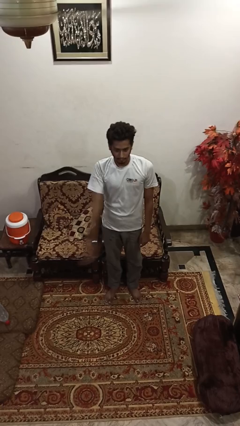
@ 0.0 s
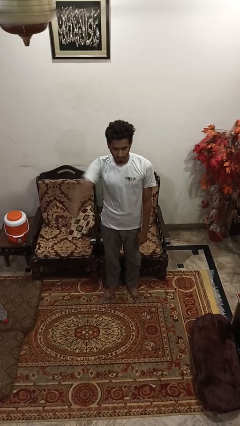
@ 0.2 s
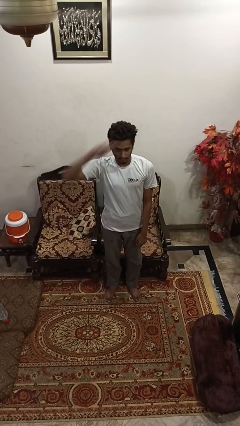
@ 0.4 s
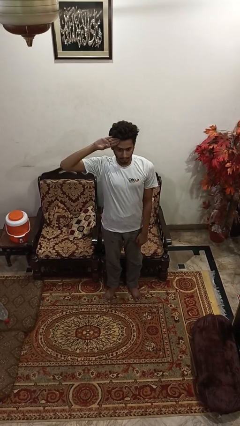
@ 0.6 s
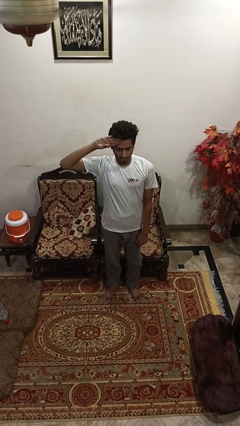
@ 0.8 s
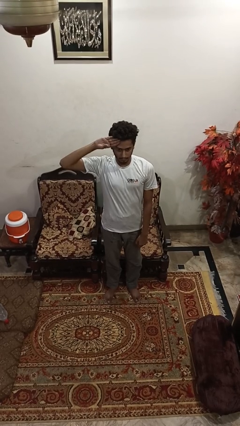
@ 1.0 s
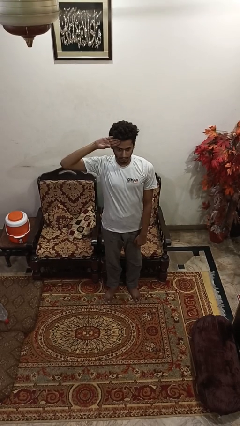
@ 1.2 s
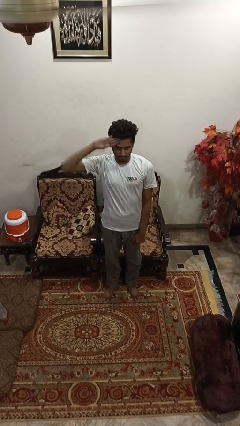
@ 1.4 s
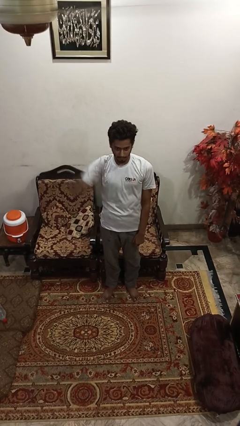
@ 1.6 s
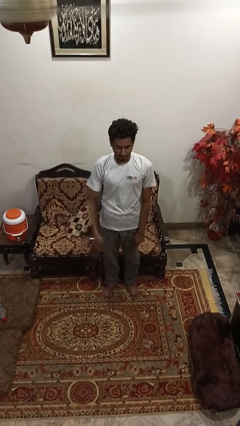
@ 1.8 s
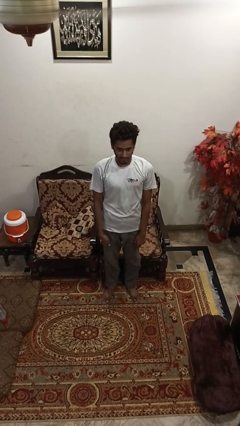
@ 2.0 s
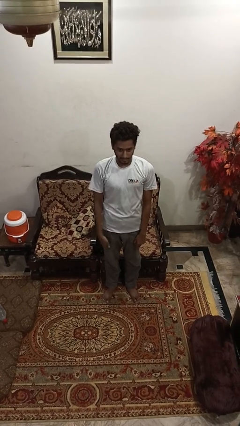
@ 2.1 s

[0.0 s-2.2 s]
person salutes

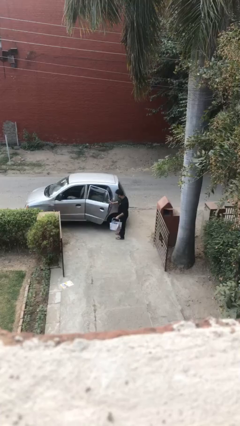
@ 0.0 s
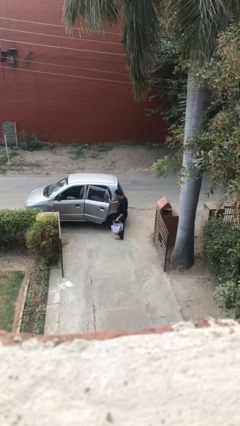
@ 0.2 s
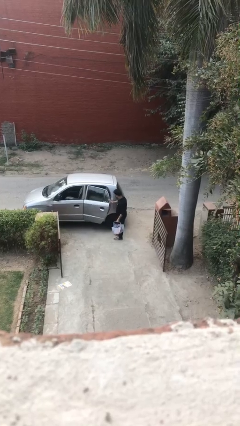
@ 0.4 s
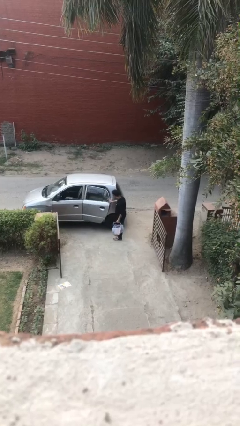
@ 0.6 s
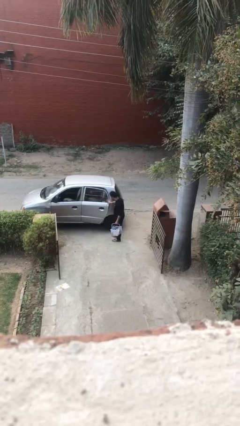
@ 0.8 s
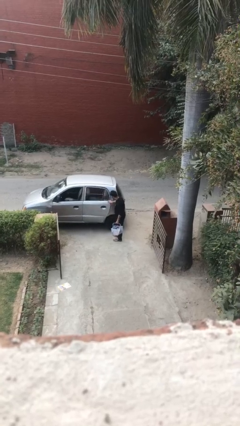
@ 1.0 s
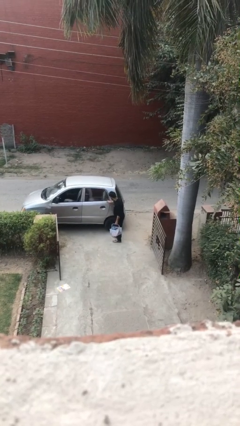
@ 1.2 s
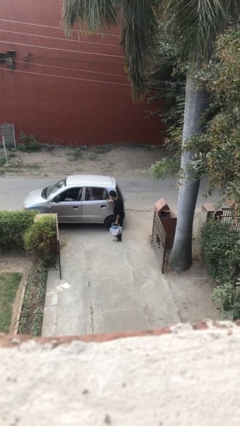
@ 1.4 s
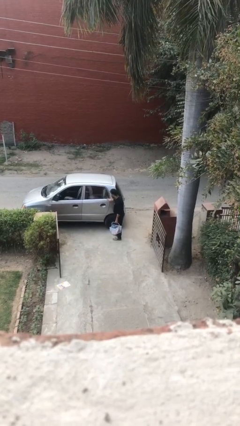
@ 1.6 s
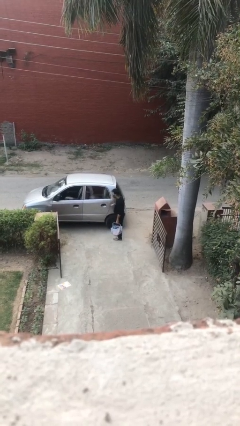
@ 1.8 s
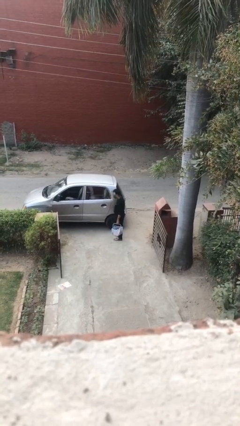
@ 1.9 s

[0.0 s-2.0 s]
person closes car door

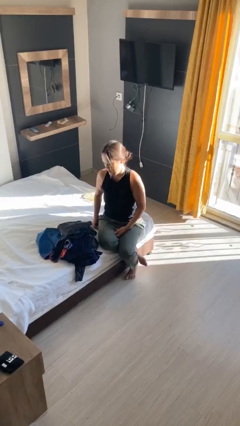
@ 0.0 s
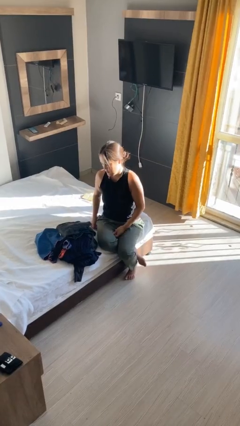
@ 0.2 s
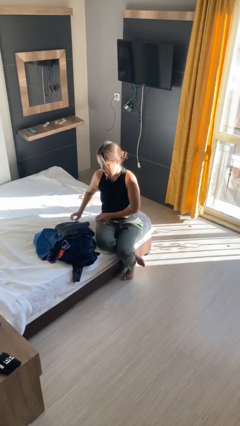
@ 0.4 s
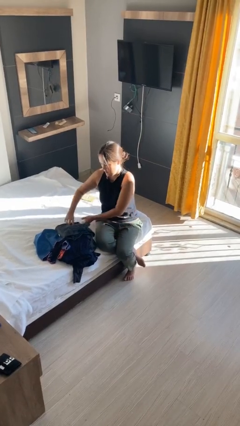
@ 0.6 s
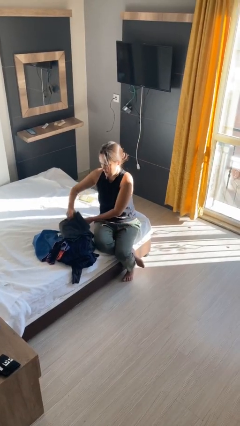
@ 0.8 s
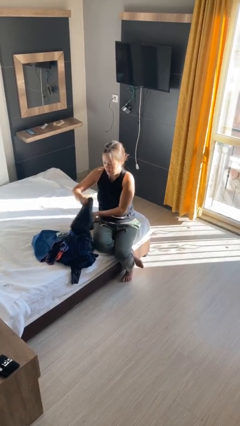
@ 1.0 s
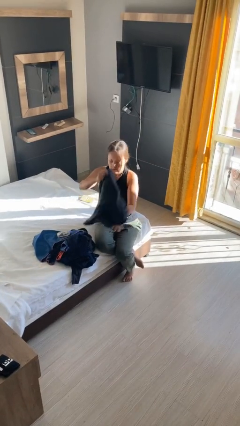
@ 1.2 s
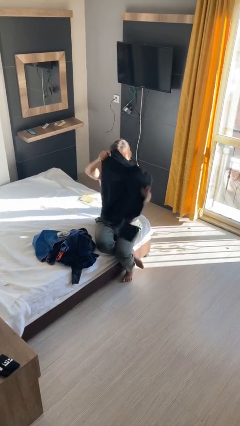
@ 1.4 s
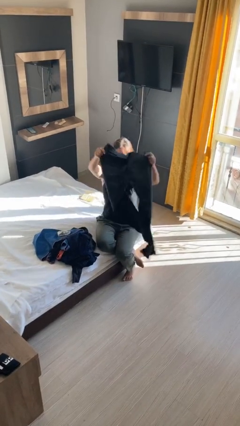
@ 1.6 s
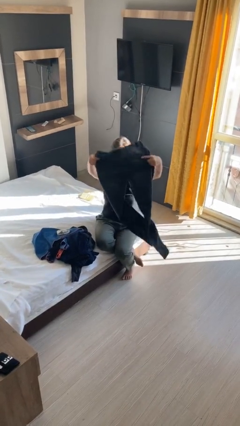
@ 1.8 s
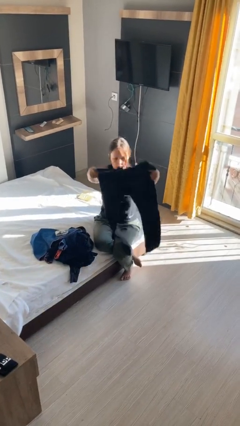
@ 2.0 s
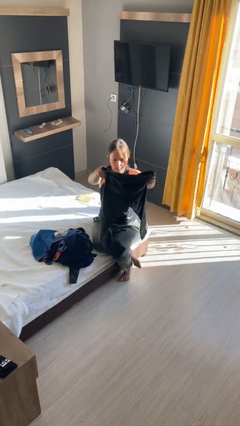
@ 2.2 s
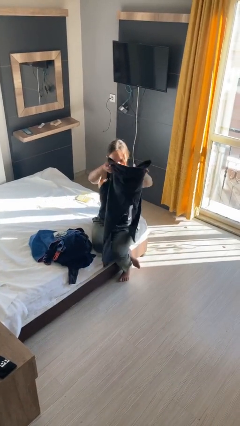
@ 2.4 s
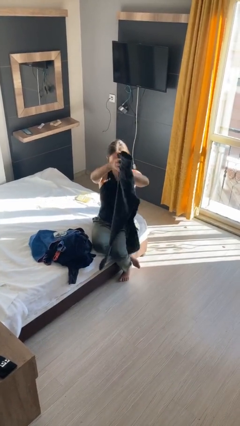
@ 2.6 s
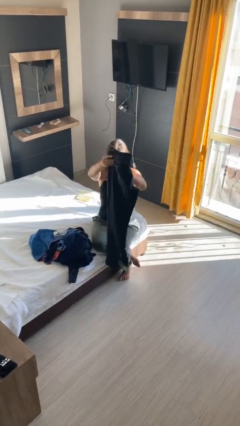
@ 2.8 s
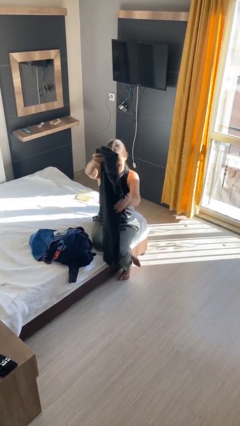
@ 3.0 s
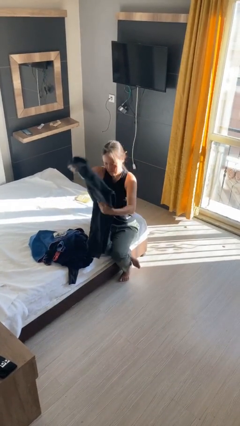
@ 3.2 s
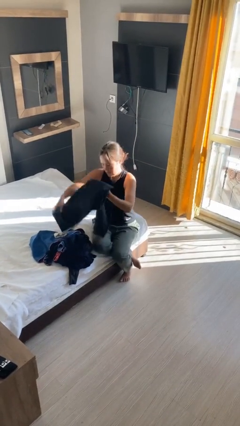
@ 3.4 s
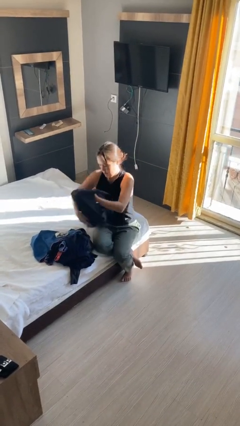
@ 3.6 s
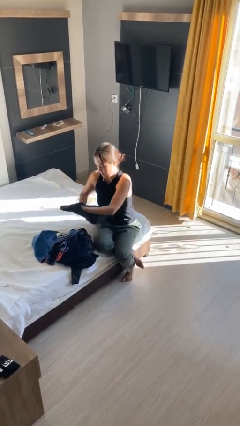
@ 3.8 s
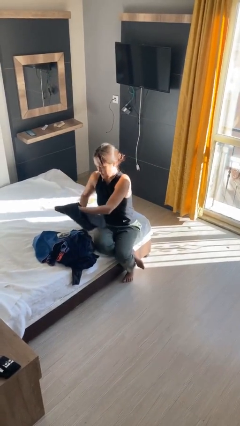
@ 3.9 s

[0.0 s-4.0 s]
person folds pants

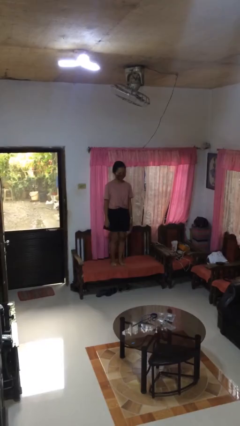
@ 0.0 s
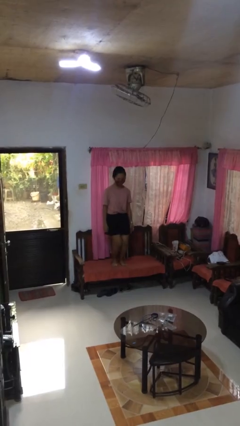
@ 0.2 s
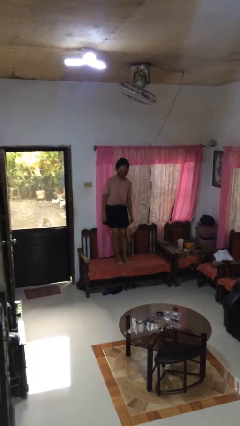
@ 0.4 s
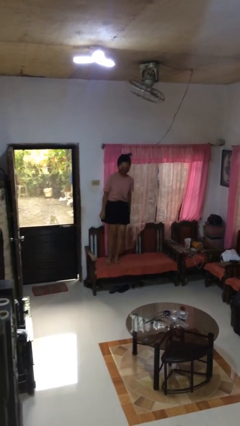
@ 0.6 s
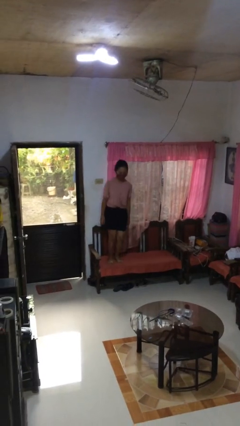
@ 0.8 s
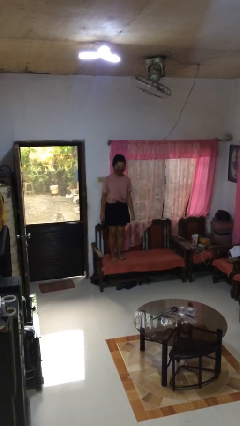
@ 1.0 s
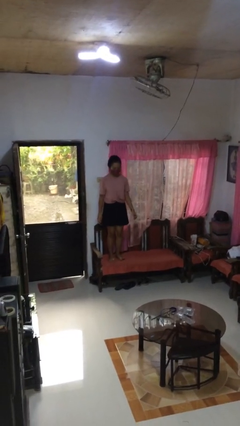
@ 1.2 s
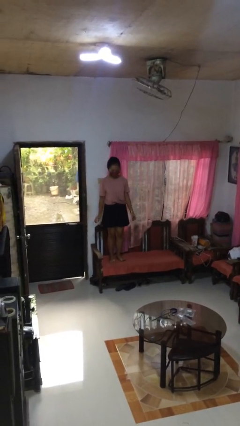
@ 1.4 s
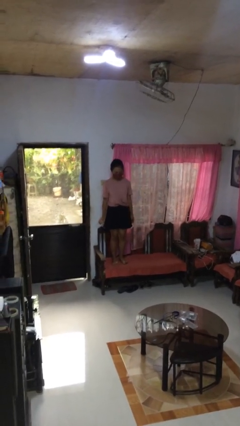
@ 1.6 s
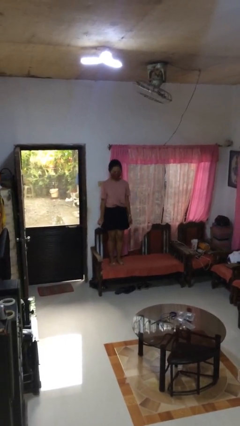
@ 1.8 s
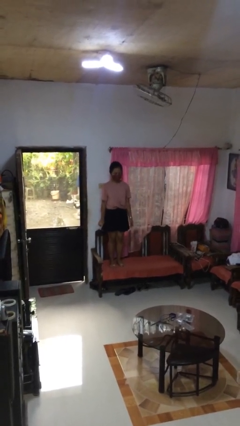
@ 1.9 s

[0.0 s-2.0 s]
person jumps on couch

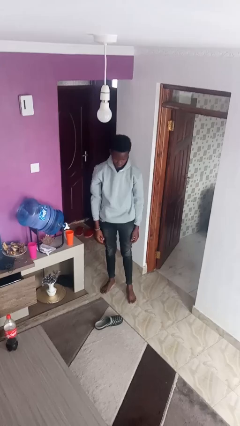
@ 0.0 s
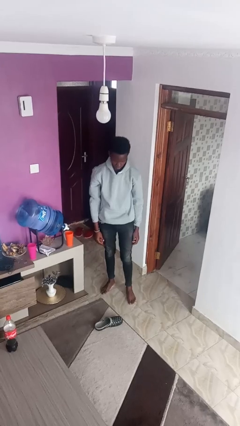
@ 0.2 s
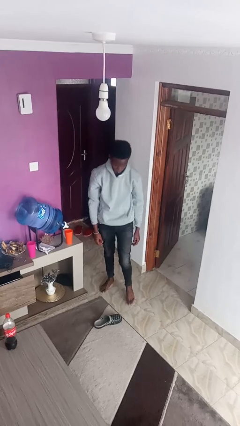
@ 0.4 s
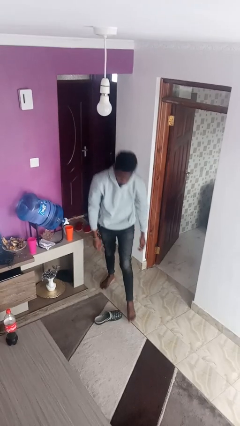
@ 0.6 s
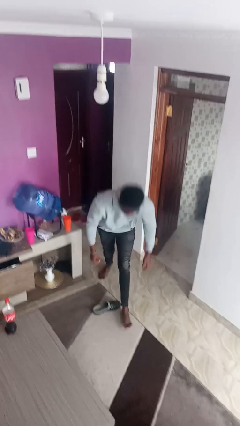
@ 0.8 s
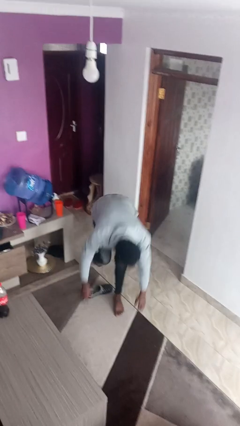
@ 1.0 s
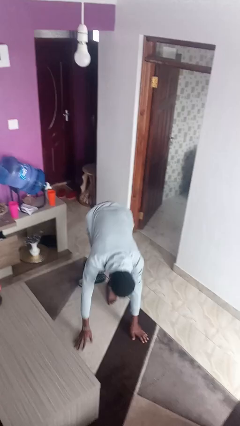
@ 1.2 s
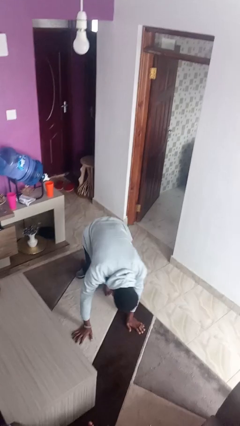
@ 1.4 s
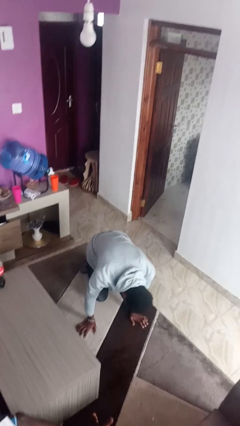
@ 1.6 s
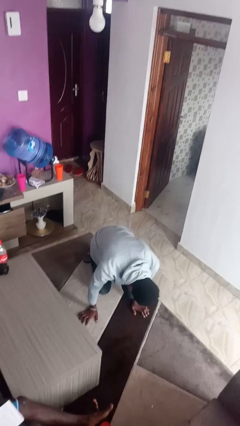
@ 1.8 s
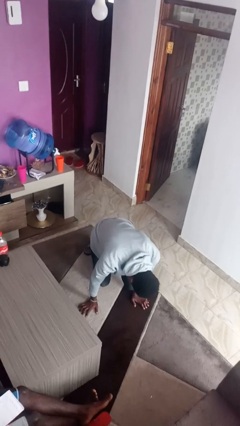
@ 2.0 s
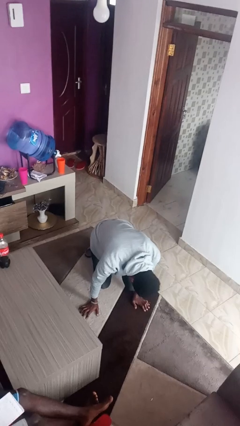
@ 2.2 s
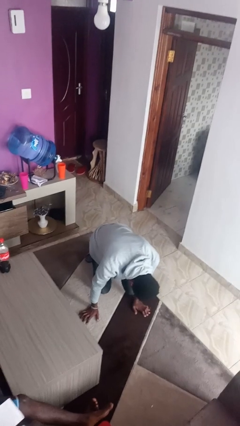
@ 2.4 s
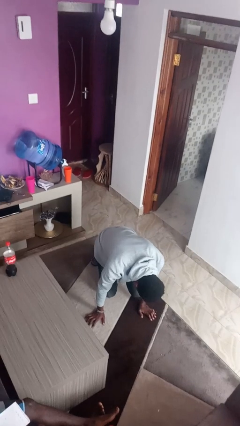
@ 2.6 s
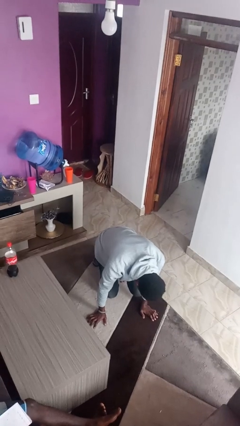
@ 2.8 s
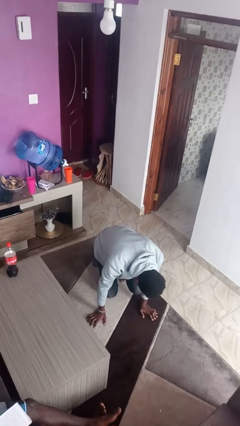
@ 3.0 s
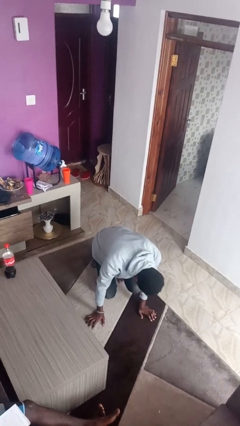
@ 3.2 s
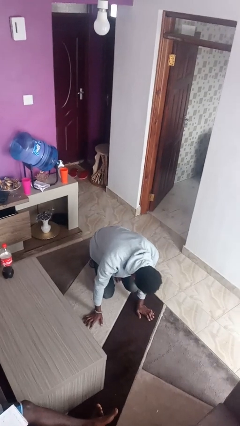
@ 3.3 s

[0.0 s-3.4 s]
person trips on object on floor

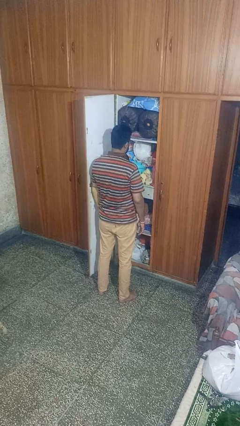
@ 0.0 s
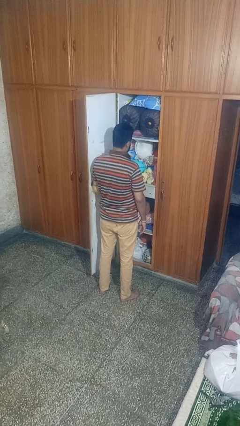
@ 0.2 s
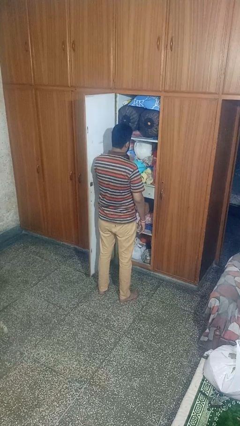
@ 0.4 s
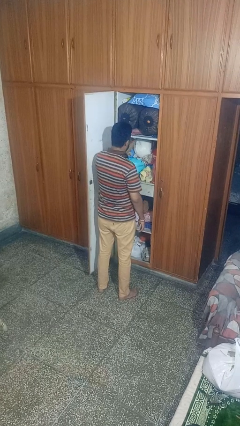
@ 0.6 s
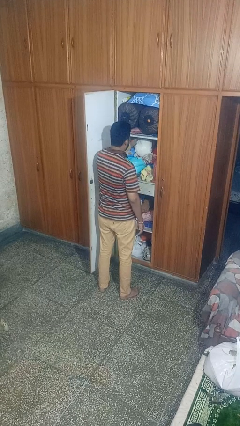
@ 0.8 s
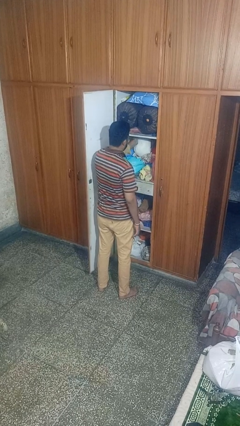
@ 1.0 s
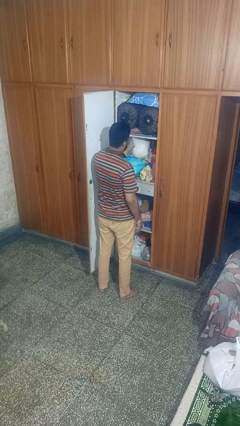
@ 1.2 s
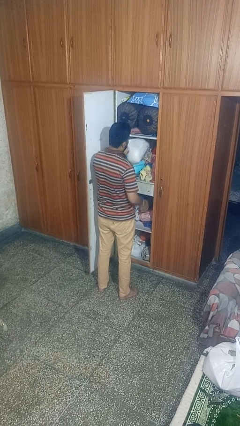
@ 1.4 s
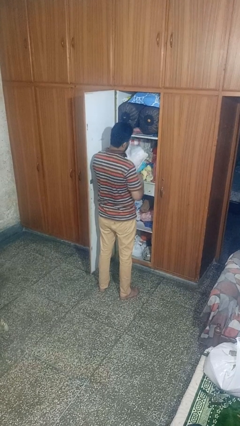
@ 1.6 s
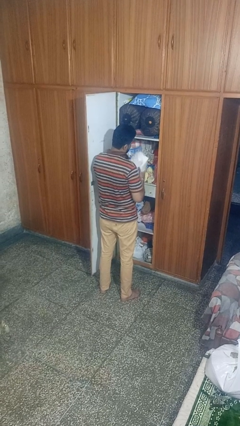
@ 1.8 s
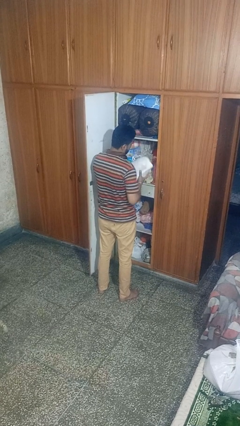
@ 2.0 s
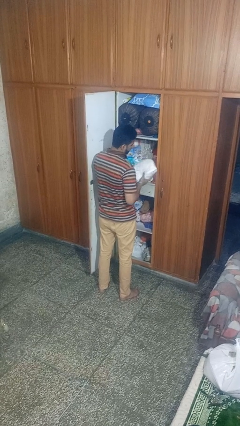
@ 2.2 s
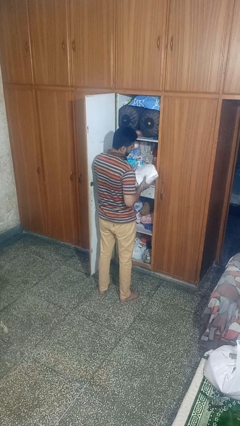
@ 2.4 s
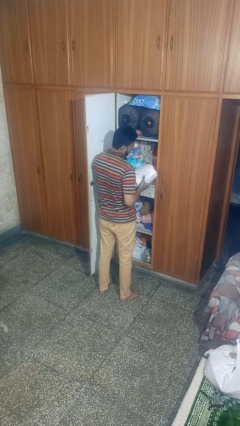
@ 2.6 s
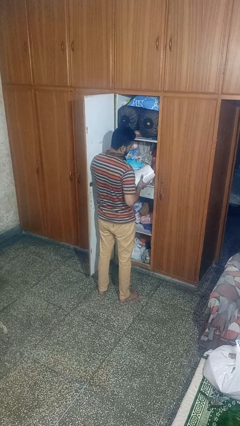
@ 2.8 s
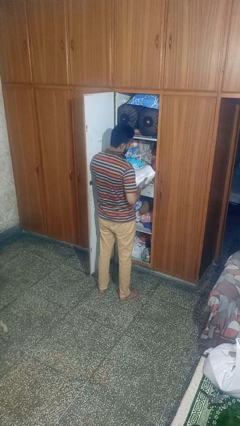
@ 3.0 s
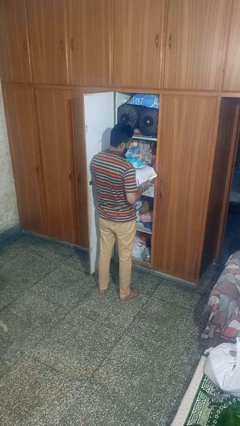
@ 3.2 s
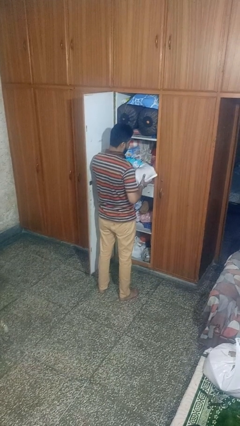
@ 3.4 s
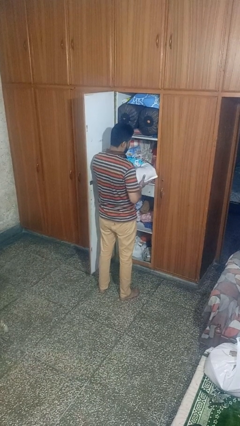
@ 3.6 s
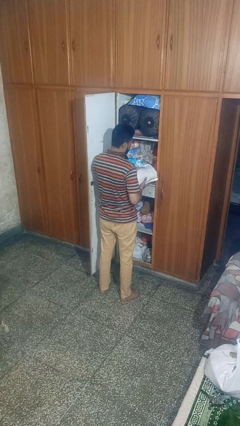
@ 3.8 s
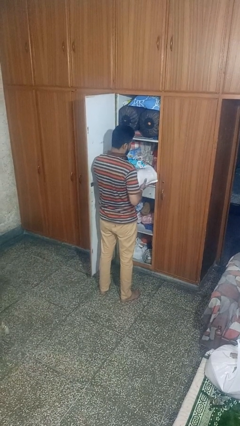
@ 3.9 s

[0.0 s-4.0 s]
person picks up object from cabinet
